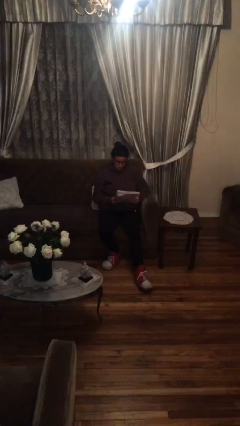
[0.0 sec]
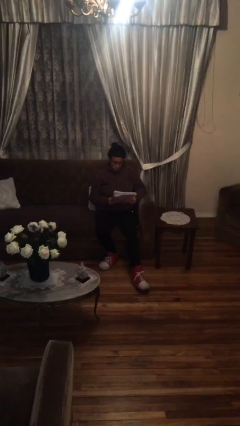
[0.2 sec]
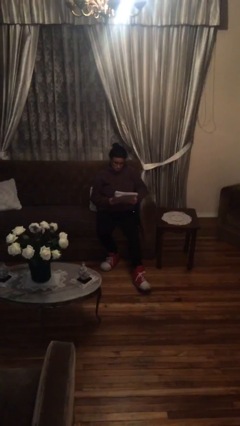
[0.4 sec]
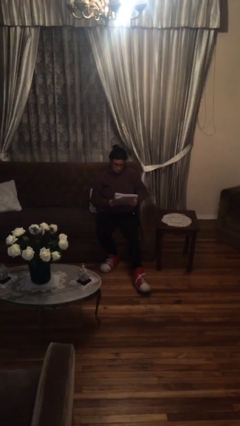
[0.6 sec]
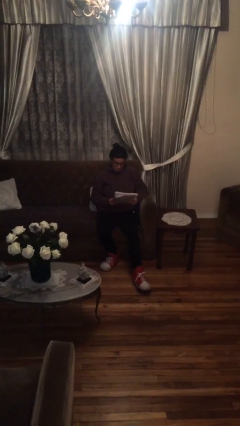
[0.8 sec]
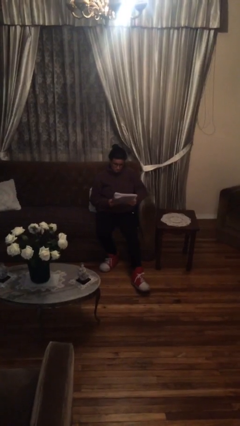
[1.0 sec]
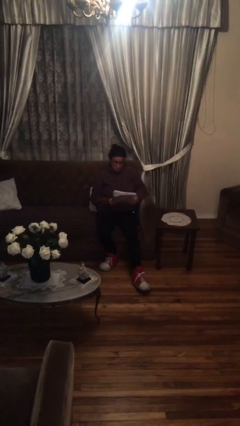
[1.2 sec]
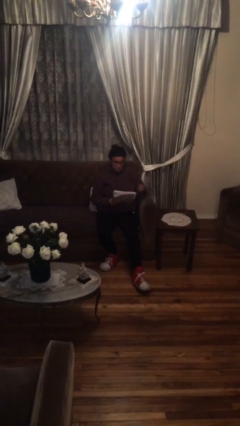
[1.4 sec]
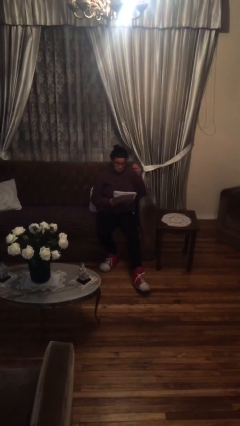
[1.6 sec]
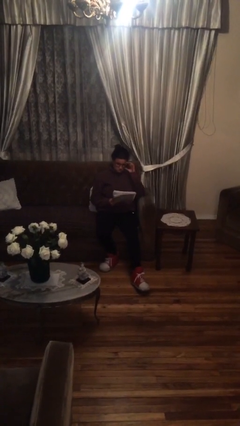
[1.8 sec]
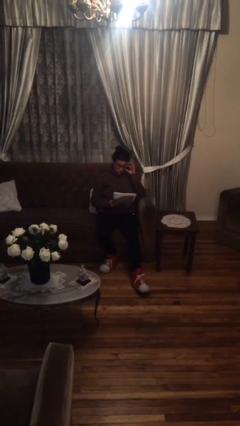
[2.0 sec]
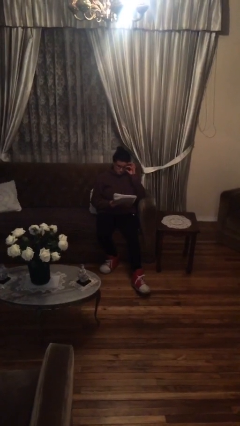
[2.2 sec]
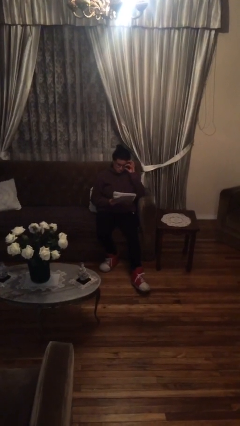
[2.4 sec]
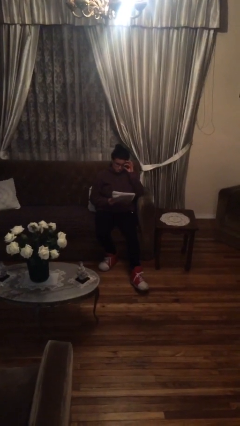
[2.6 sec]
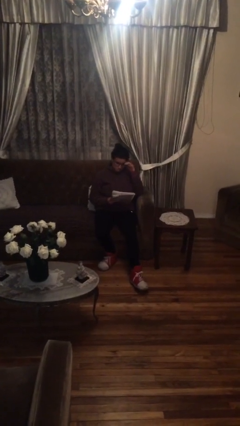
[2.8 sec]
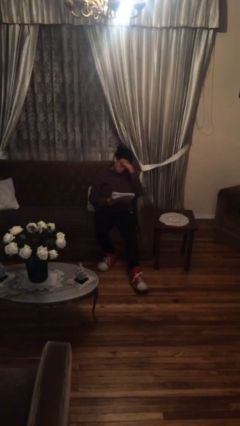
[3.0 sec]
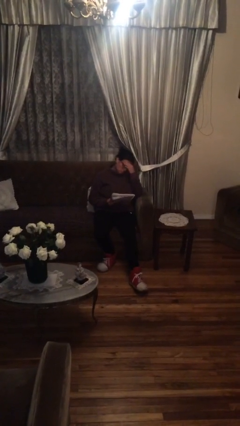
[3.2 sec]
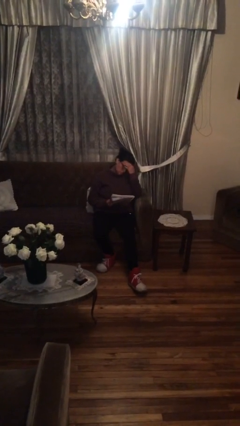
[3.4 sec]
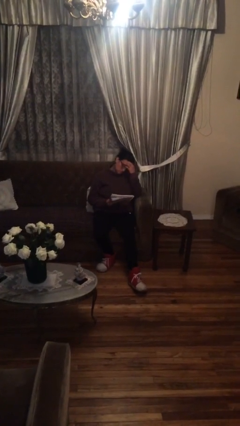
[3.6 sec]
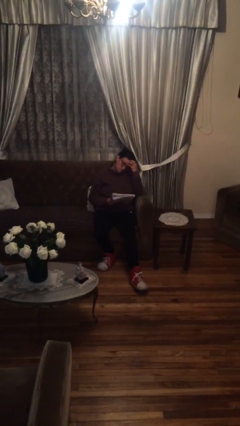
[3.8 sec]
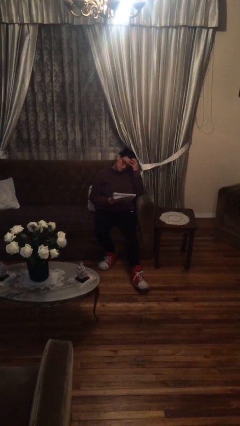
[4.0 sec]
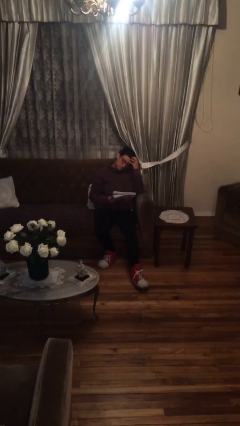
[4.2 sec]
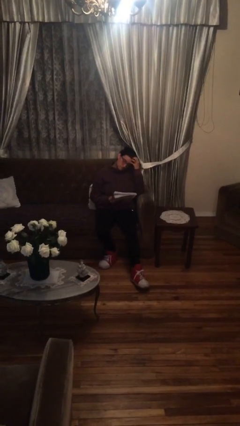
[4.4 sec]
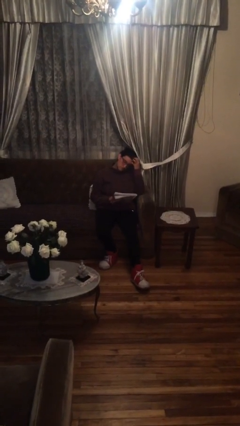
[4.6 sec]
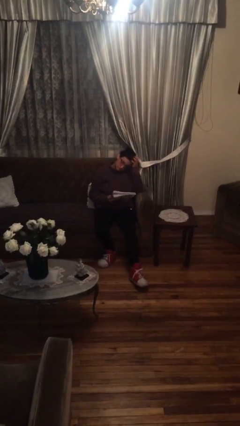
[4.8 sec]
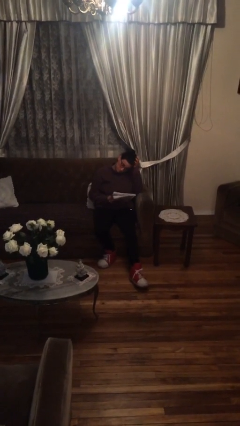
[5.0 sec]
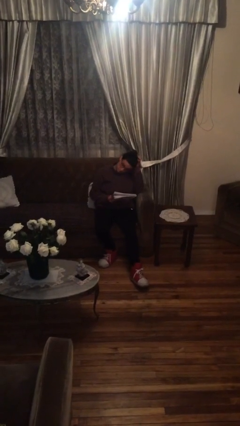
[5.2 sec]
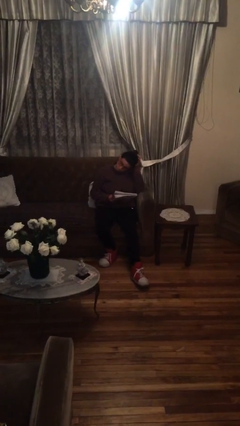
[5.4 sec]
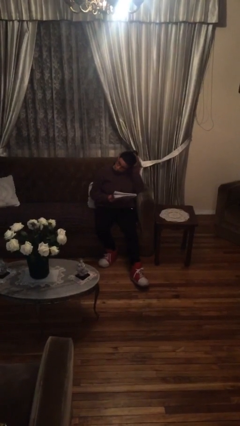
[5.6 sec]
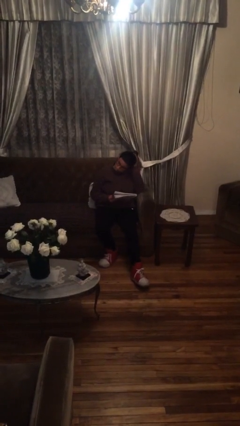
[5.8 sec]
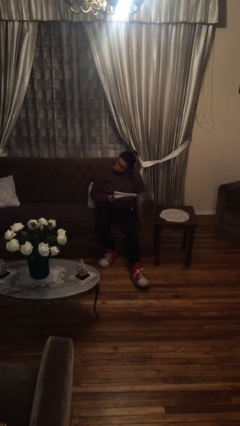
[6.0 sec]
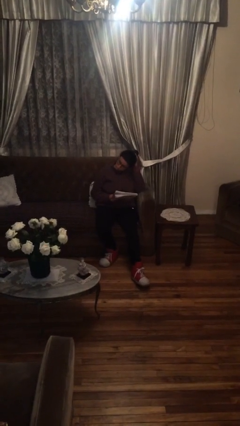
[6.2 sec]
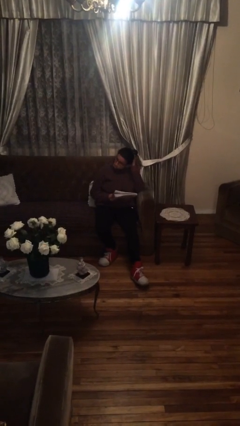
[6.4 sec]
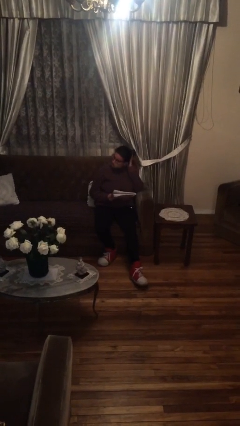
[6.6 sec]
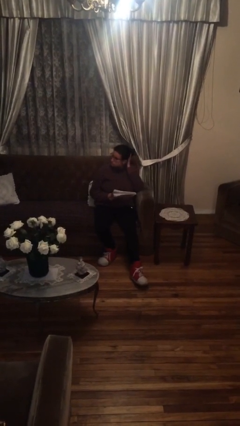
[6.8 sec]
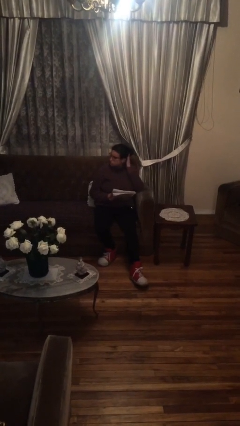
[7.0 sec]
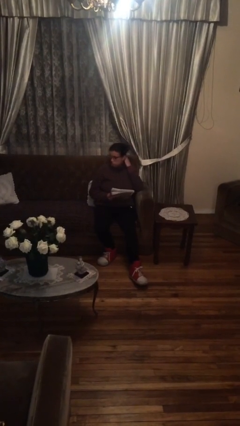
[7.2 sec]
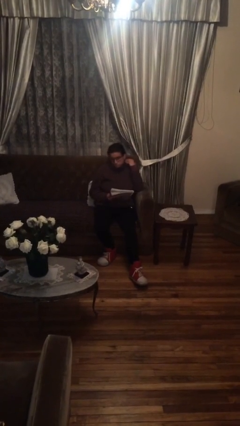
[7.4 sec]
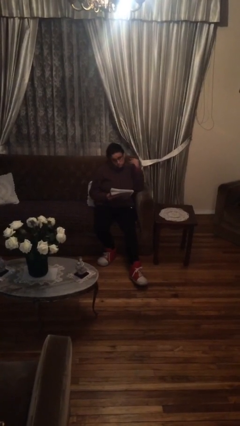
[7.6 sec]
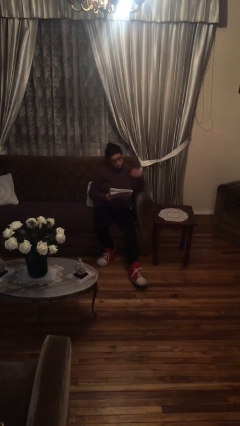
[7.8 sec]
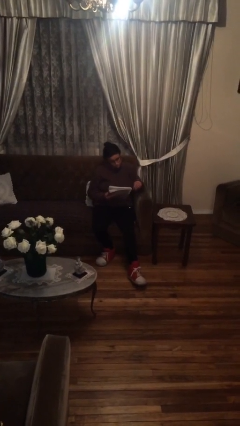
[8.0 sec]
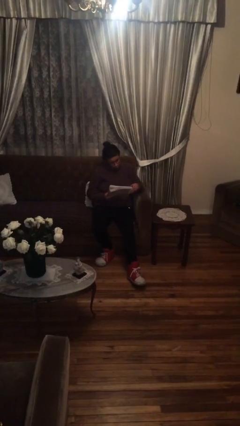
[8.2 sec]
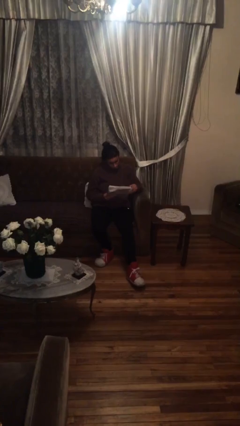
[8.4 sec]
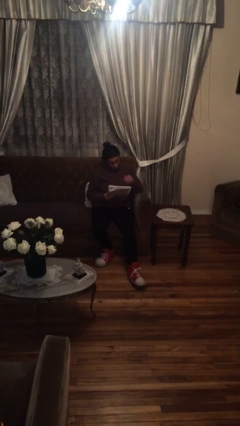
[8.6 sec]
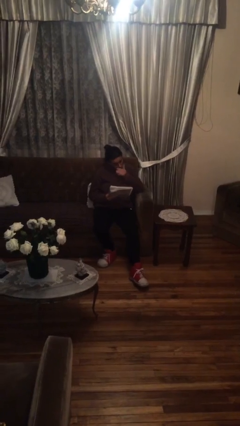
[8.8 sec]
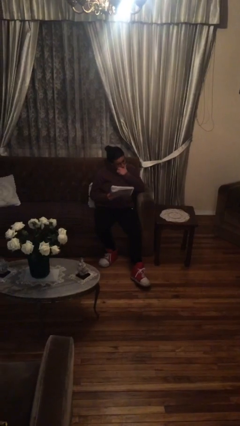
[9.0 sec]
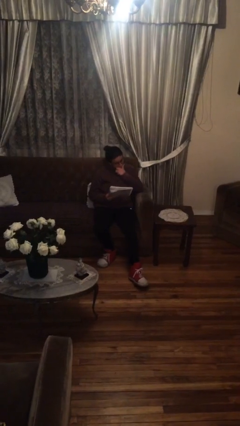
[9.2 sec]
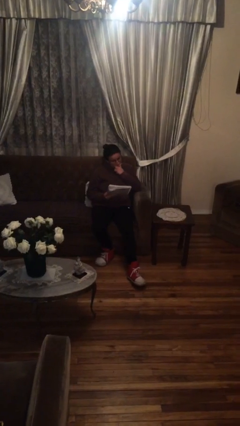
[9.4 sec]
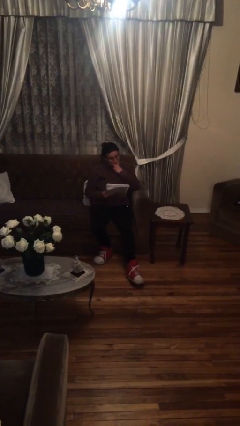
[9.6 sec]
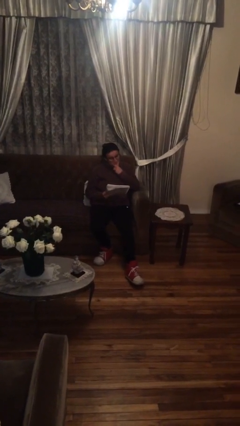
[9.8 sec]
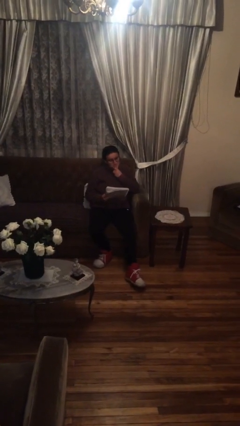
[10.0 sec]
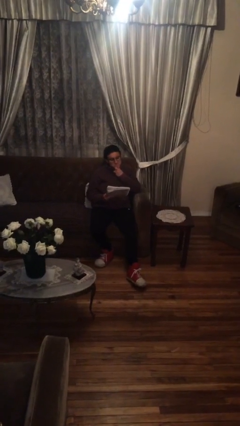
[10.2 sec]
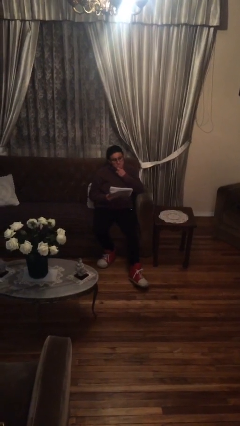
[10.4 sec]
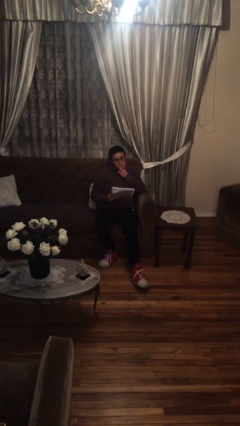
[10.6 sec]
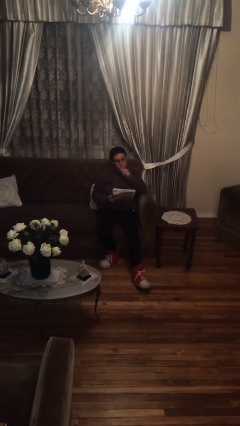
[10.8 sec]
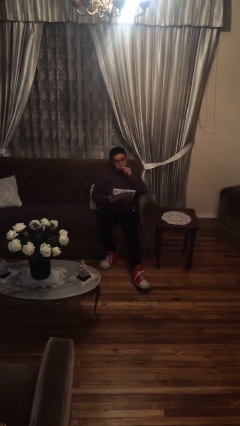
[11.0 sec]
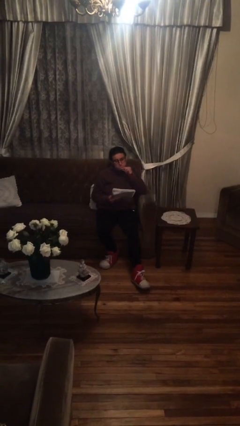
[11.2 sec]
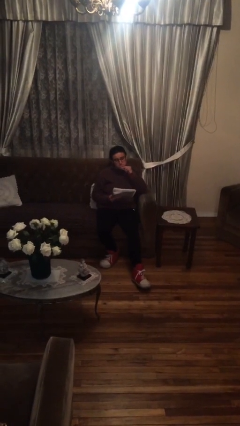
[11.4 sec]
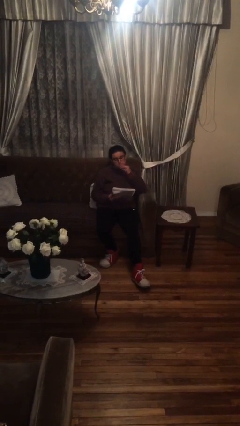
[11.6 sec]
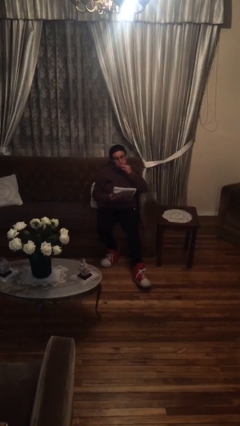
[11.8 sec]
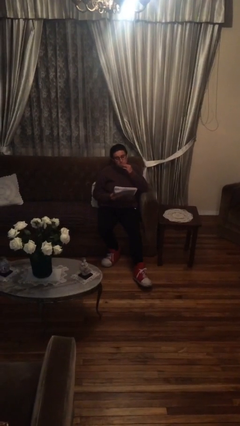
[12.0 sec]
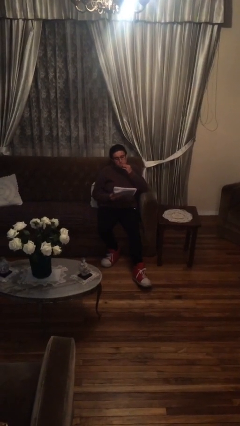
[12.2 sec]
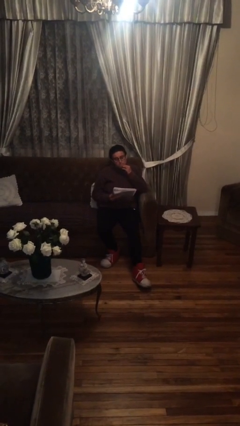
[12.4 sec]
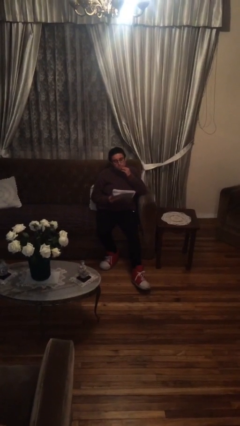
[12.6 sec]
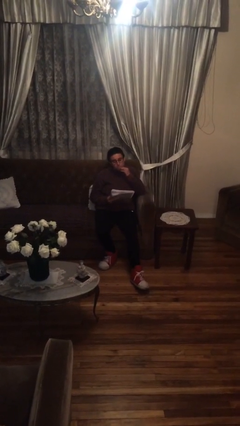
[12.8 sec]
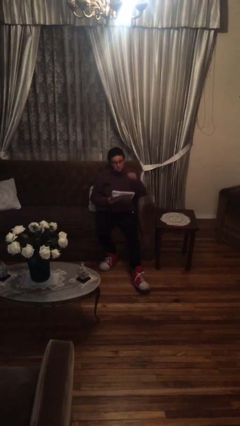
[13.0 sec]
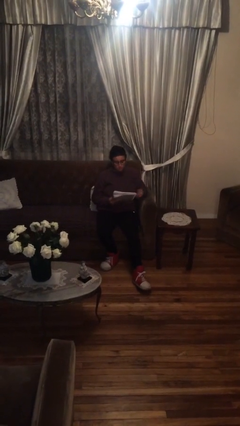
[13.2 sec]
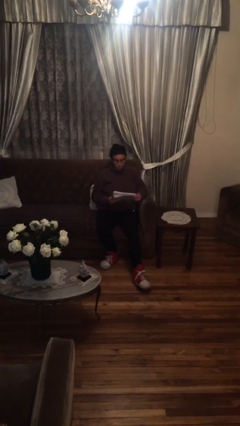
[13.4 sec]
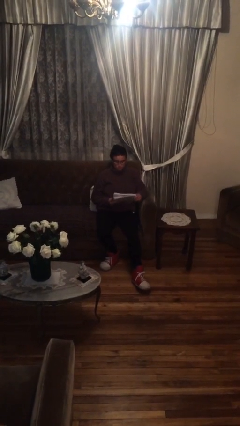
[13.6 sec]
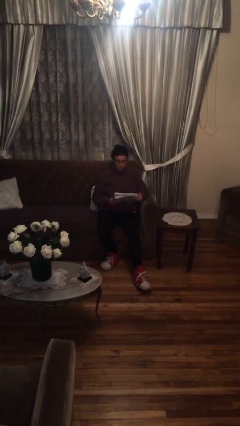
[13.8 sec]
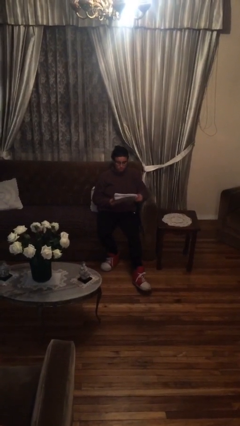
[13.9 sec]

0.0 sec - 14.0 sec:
person reads document

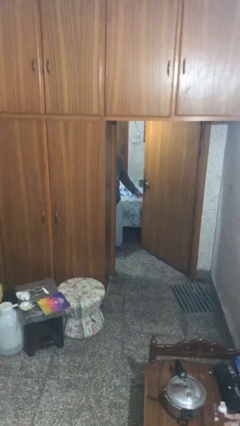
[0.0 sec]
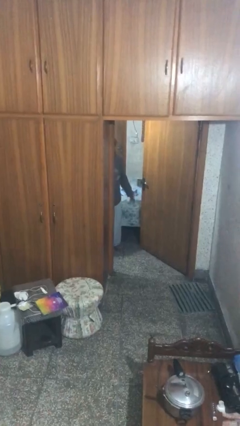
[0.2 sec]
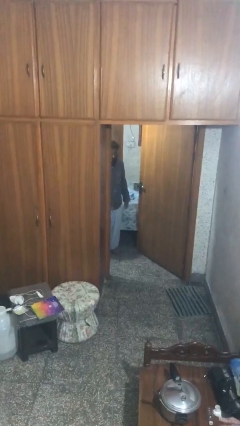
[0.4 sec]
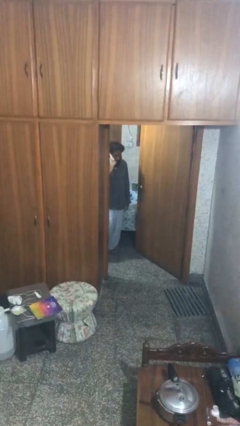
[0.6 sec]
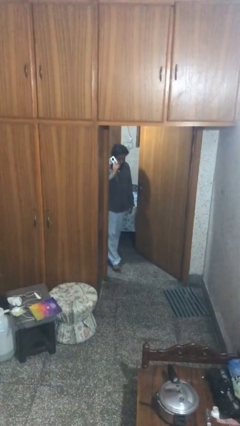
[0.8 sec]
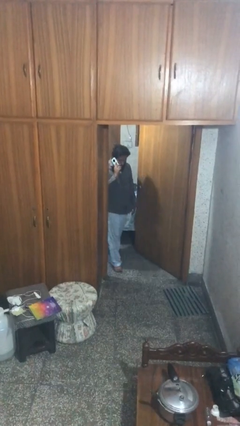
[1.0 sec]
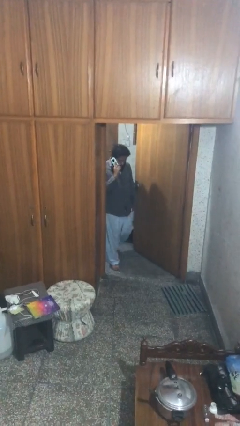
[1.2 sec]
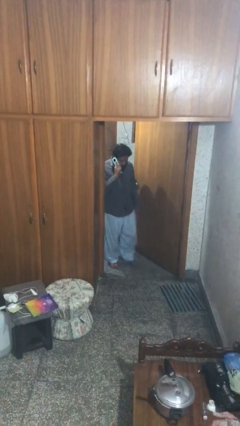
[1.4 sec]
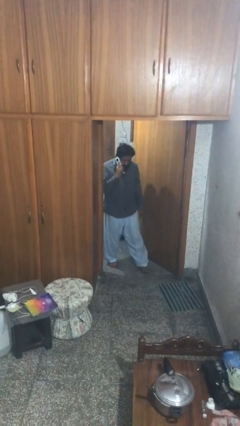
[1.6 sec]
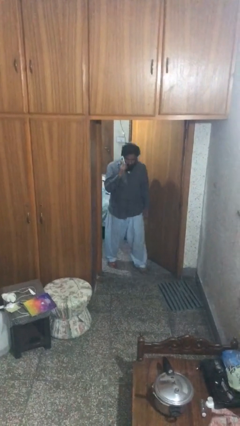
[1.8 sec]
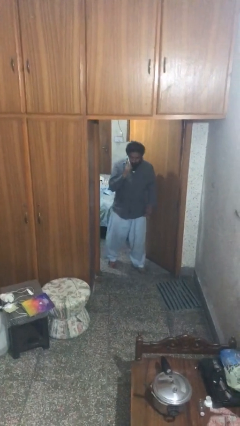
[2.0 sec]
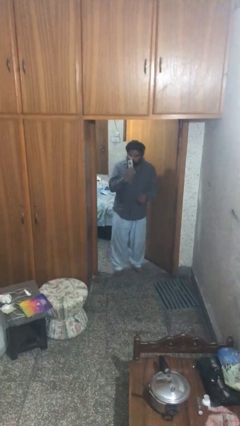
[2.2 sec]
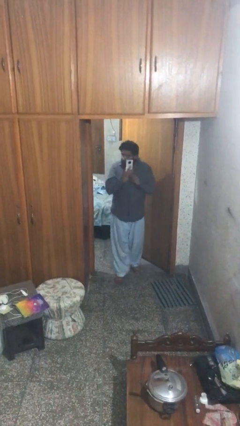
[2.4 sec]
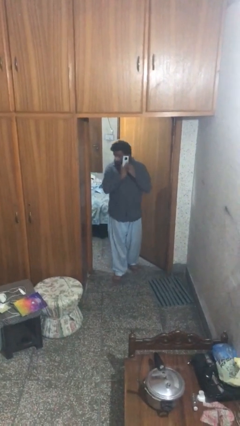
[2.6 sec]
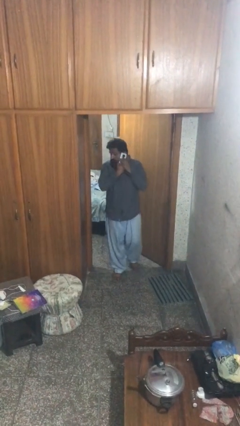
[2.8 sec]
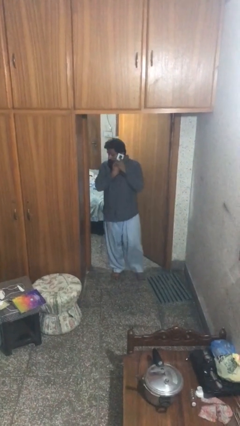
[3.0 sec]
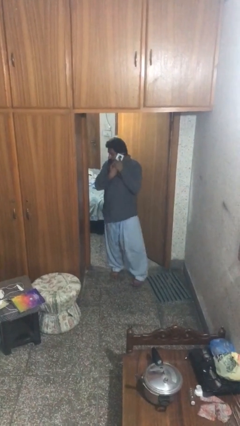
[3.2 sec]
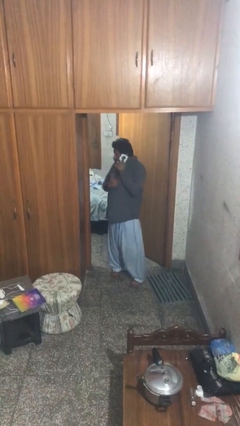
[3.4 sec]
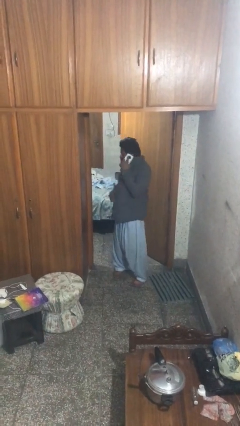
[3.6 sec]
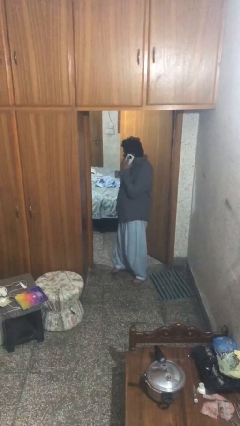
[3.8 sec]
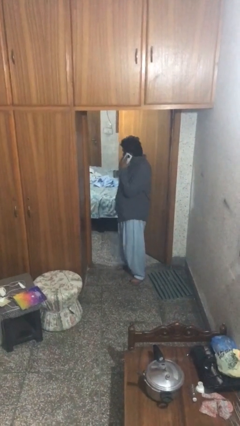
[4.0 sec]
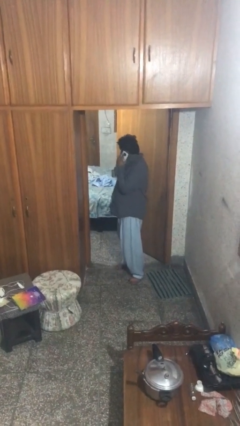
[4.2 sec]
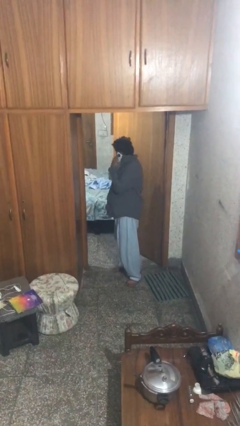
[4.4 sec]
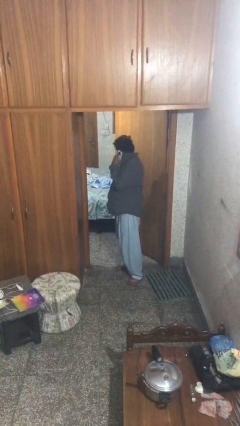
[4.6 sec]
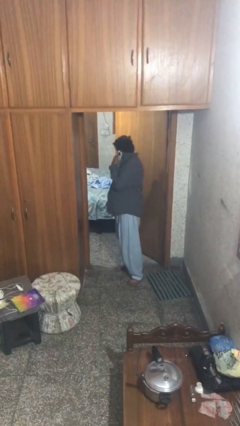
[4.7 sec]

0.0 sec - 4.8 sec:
person enters scene through structure
